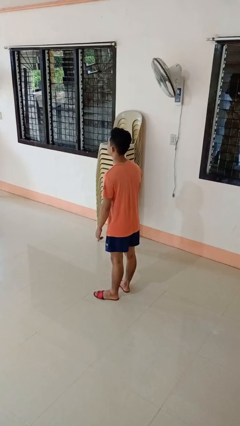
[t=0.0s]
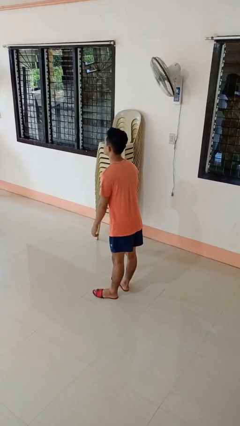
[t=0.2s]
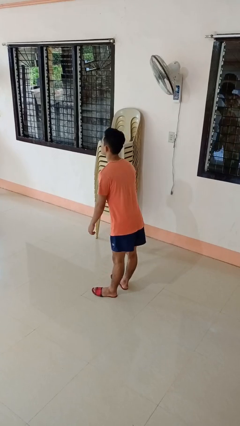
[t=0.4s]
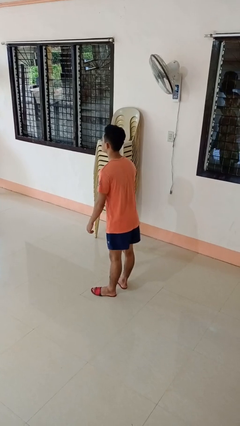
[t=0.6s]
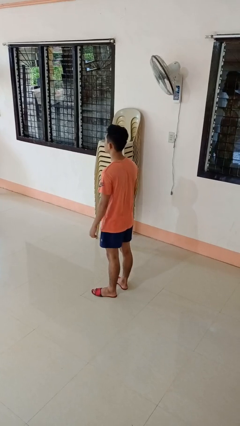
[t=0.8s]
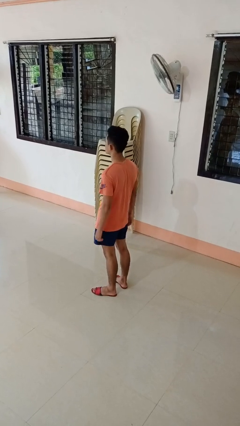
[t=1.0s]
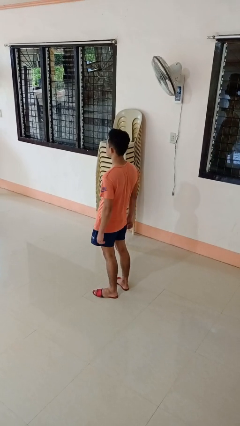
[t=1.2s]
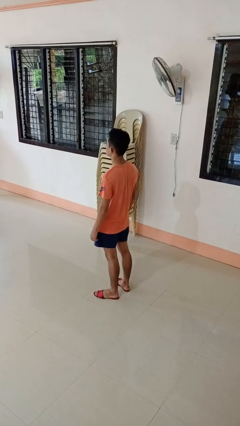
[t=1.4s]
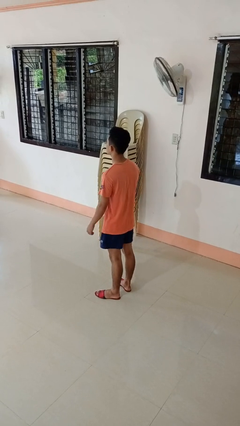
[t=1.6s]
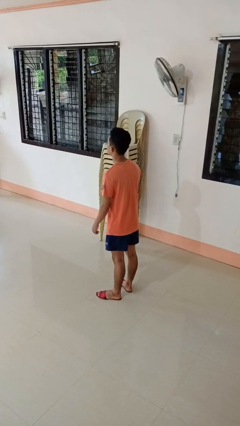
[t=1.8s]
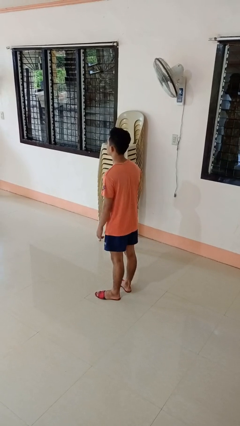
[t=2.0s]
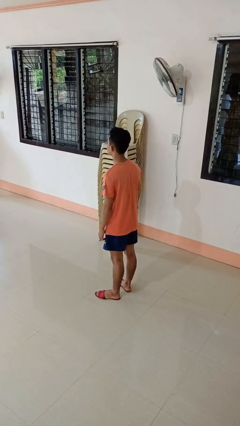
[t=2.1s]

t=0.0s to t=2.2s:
person wiggles hips

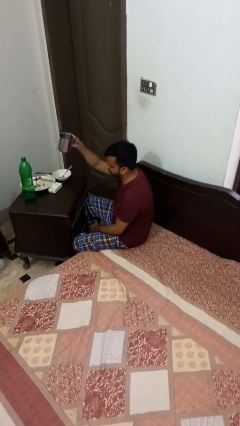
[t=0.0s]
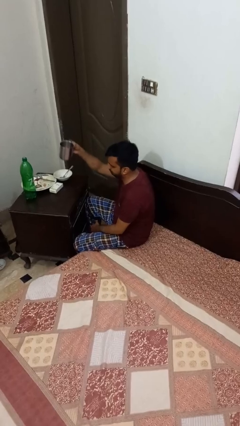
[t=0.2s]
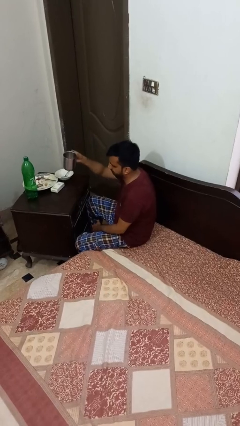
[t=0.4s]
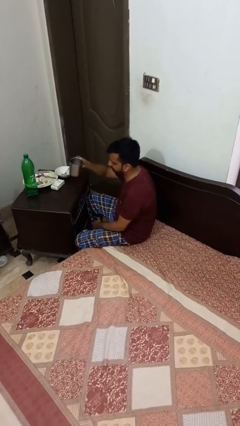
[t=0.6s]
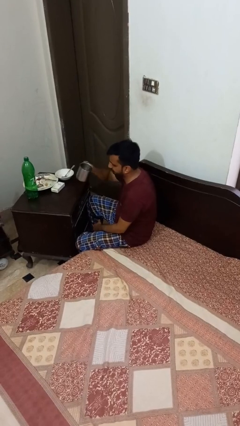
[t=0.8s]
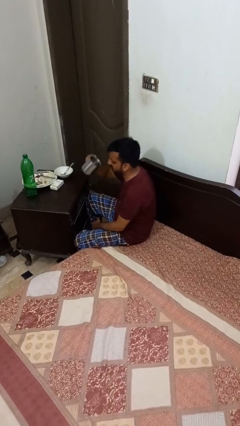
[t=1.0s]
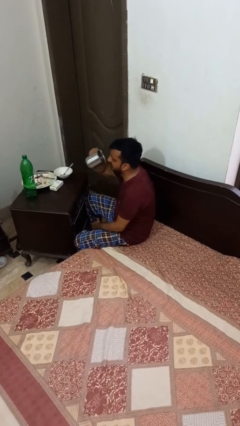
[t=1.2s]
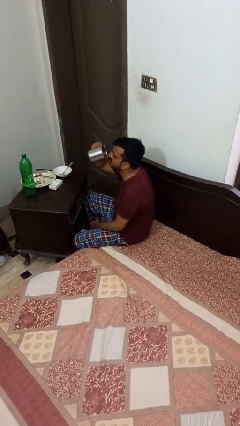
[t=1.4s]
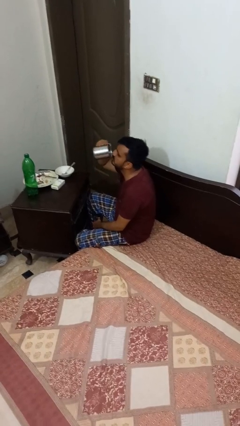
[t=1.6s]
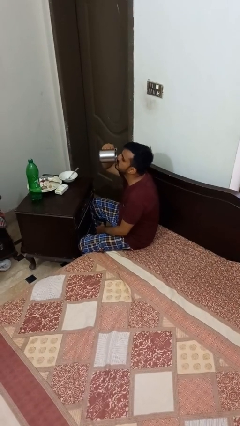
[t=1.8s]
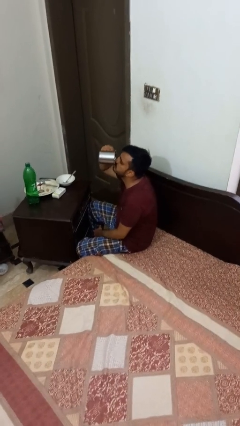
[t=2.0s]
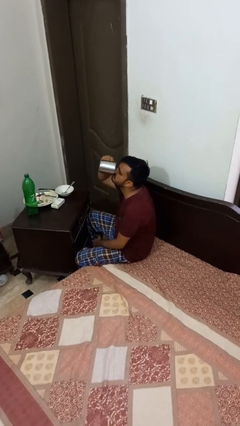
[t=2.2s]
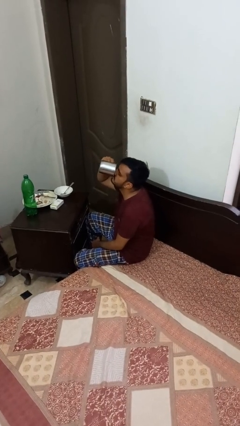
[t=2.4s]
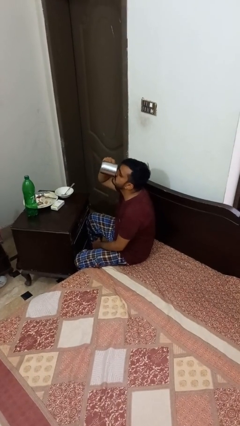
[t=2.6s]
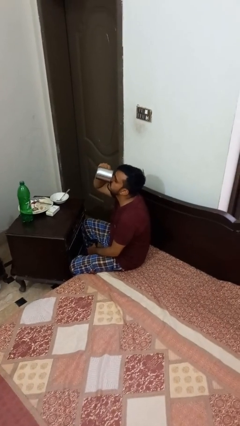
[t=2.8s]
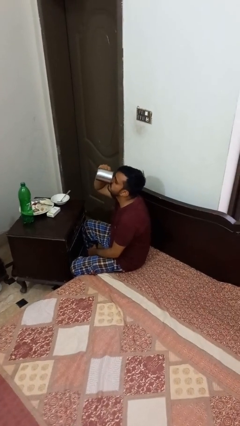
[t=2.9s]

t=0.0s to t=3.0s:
person drinks from shotglass

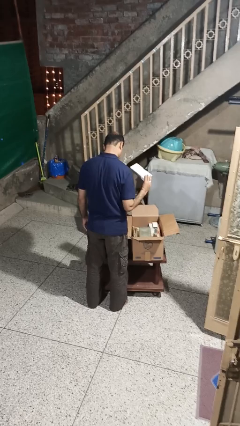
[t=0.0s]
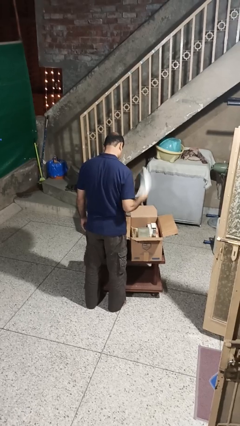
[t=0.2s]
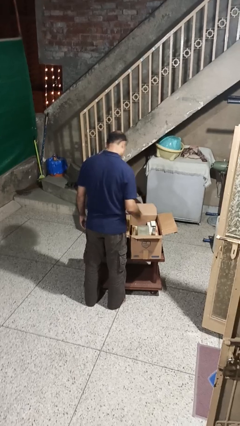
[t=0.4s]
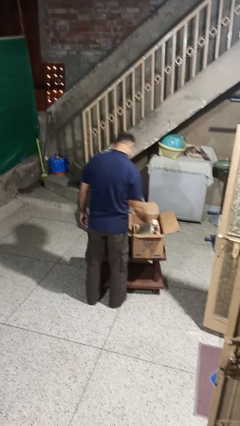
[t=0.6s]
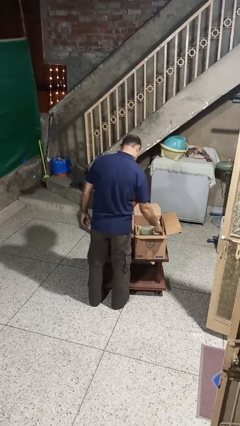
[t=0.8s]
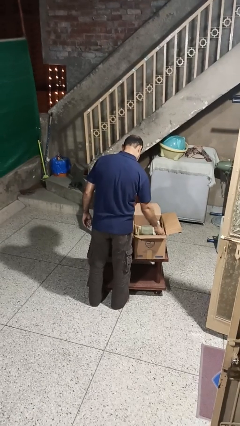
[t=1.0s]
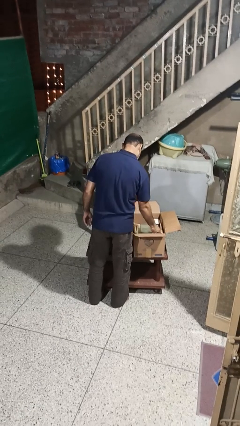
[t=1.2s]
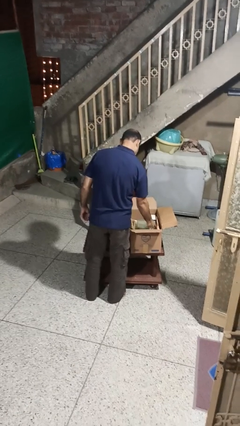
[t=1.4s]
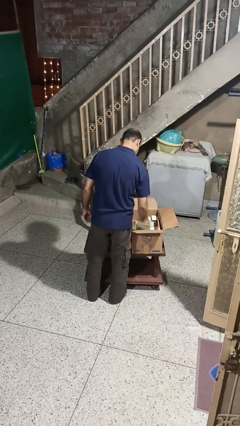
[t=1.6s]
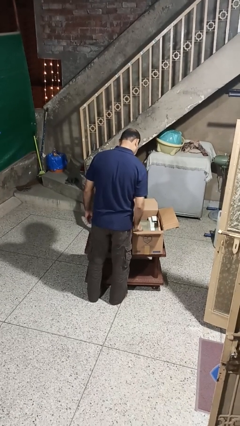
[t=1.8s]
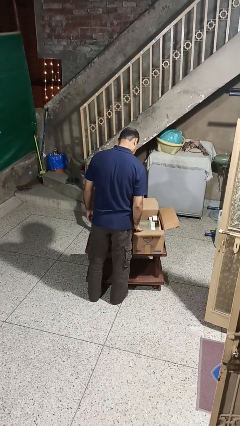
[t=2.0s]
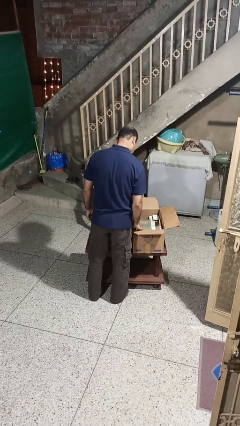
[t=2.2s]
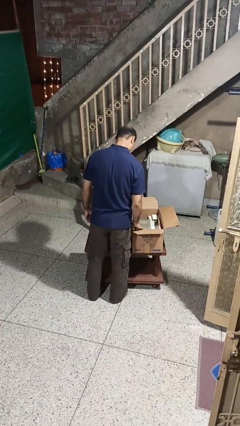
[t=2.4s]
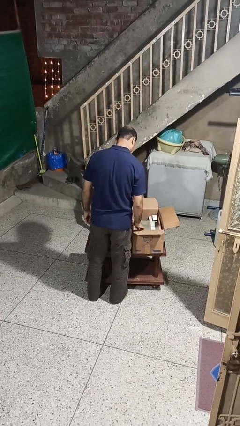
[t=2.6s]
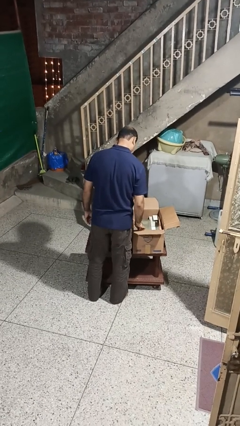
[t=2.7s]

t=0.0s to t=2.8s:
person puts object into box

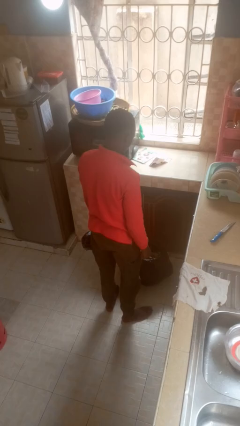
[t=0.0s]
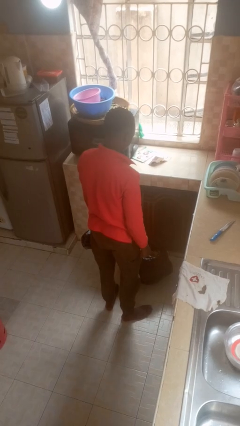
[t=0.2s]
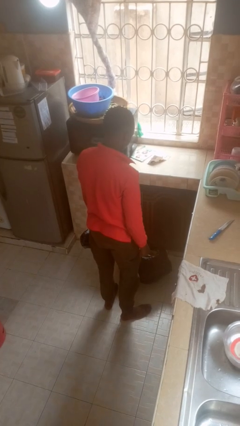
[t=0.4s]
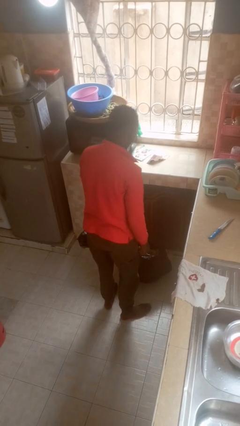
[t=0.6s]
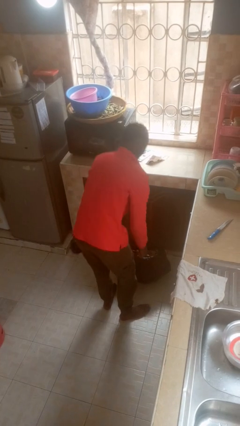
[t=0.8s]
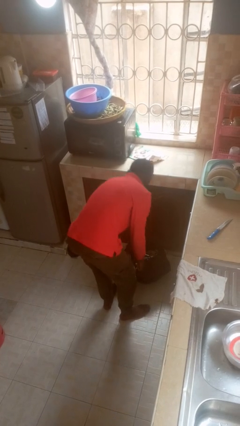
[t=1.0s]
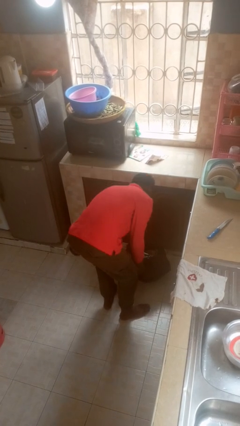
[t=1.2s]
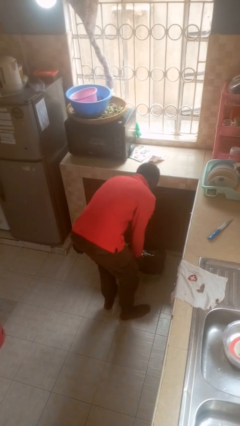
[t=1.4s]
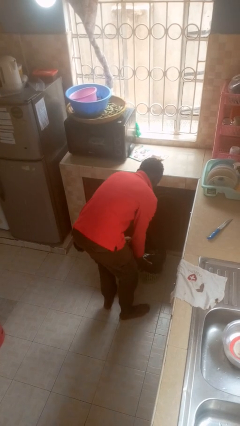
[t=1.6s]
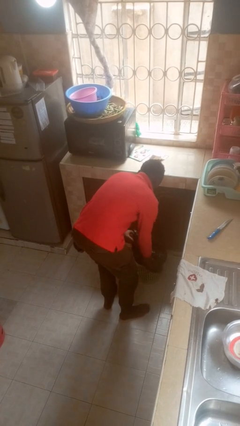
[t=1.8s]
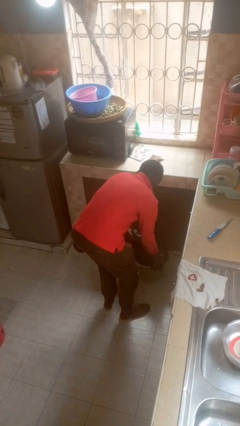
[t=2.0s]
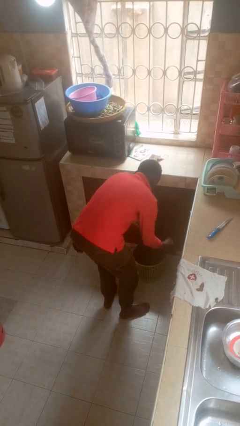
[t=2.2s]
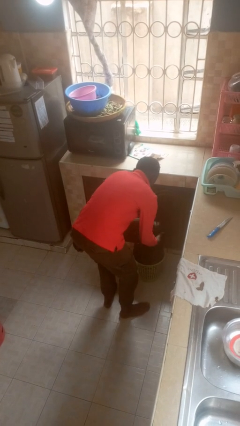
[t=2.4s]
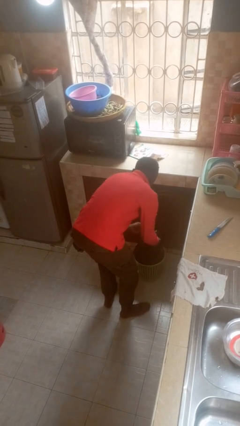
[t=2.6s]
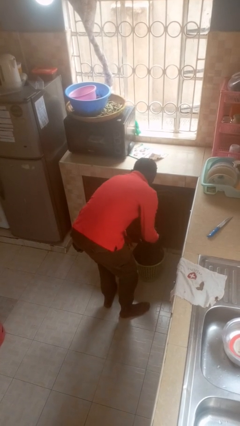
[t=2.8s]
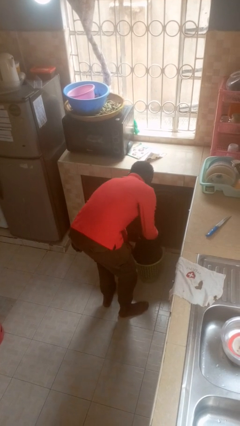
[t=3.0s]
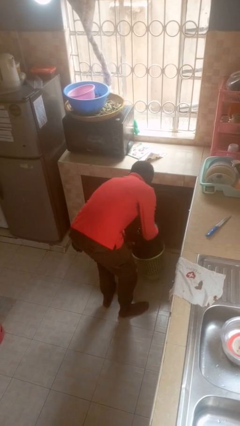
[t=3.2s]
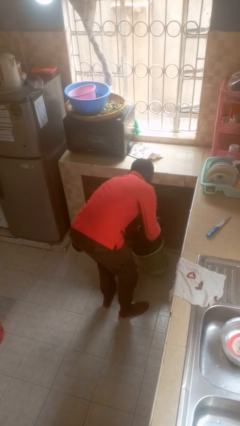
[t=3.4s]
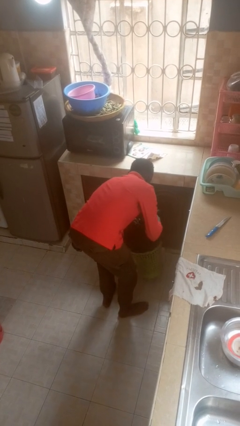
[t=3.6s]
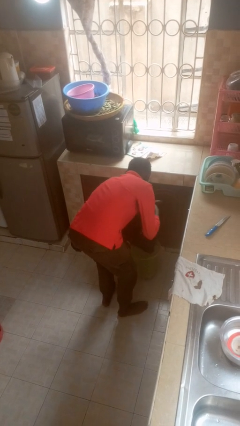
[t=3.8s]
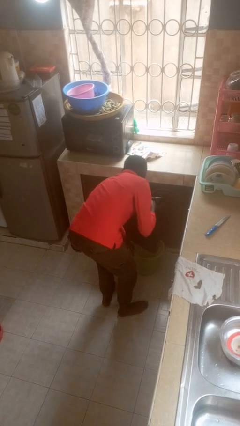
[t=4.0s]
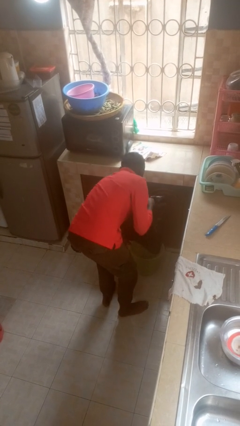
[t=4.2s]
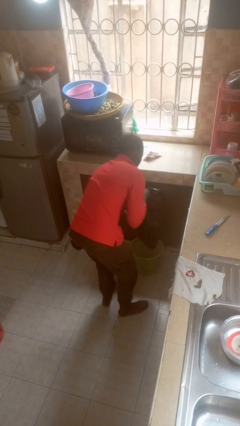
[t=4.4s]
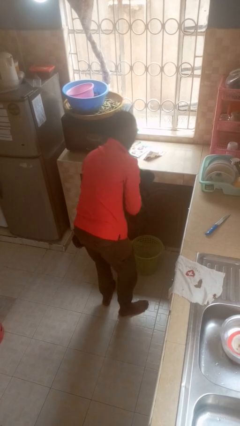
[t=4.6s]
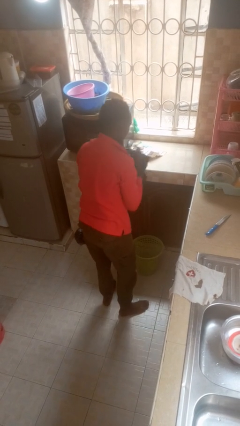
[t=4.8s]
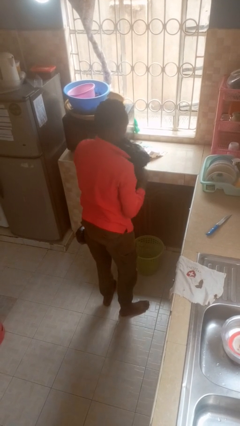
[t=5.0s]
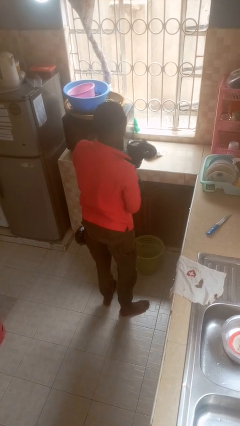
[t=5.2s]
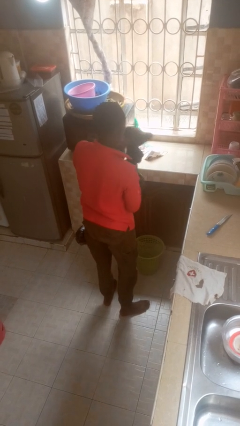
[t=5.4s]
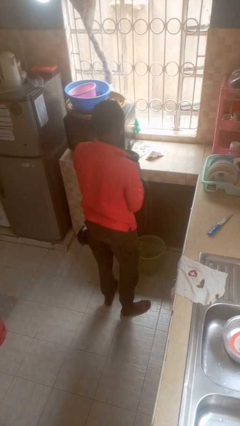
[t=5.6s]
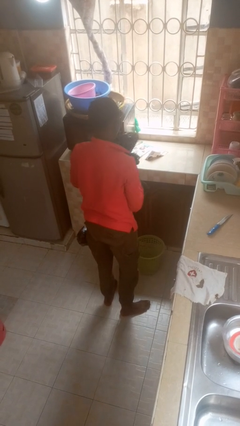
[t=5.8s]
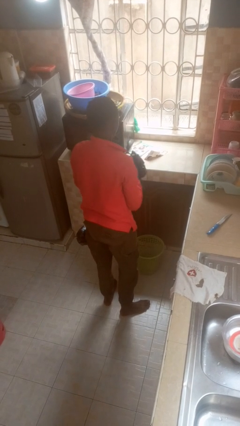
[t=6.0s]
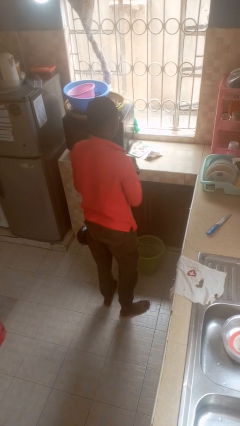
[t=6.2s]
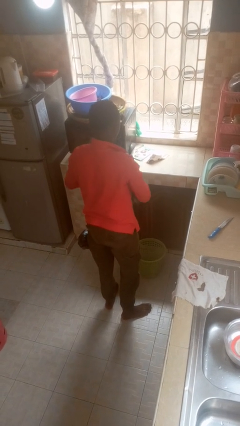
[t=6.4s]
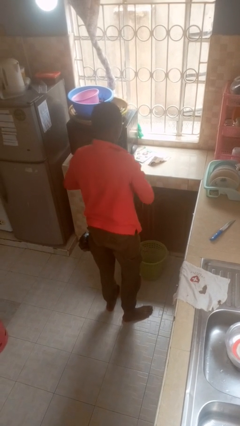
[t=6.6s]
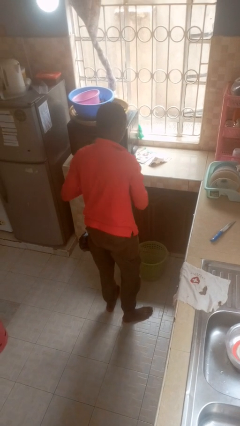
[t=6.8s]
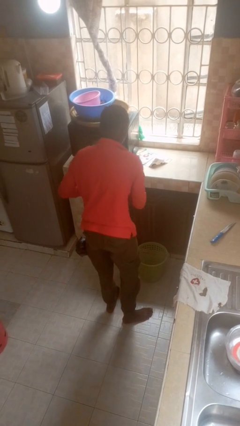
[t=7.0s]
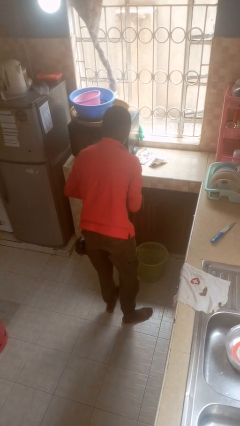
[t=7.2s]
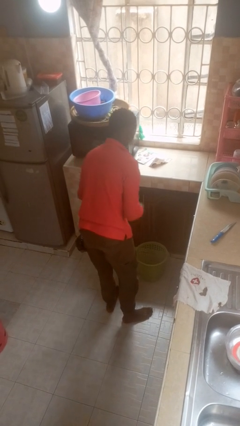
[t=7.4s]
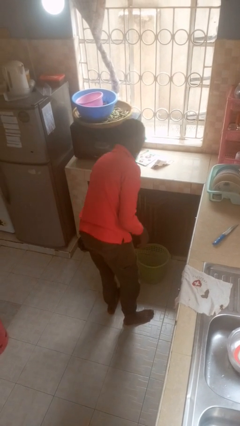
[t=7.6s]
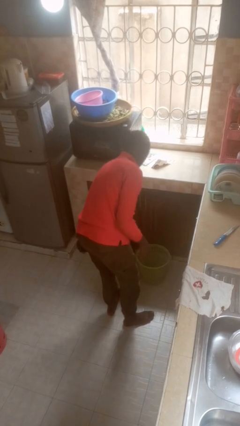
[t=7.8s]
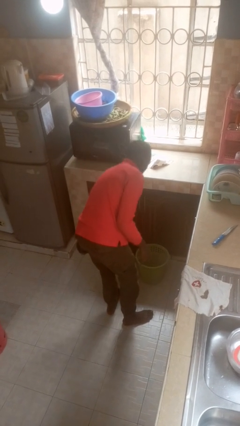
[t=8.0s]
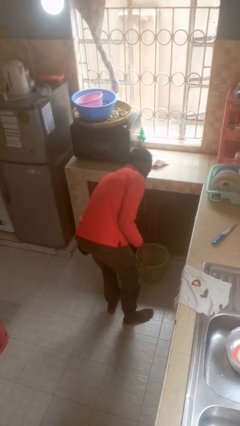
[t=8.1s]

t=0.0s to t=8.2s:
person removes trashbag from trashcan

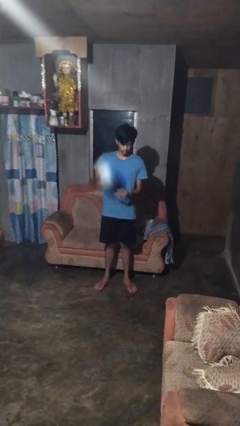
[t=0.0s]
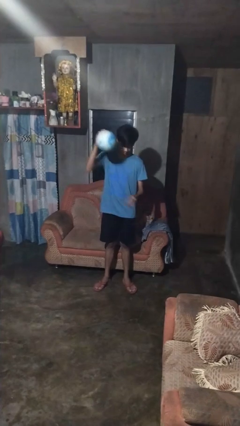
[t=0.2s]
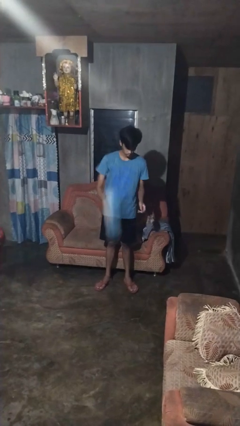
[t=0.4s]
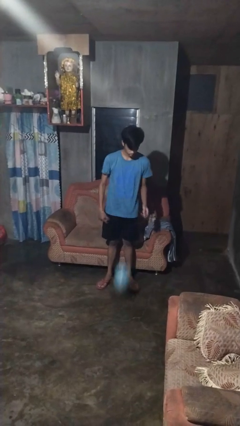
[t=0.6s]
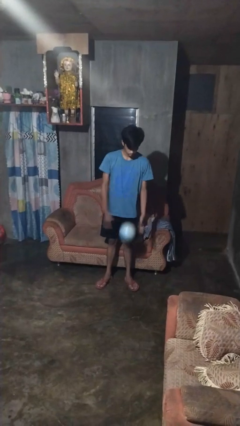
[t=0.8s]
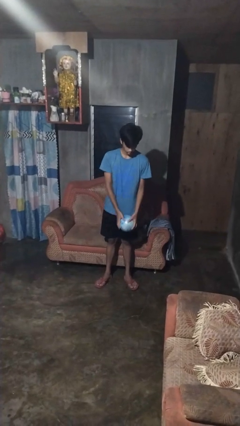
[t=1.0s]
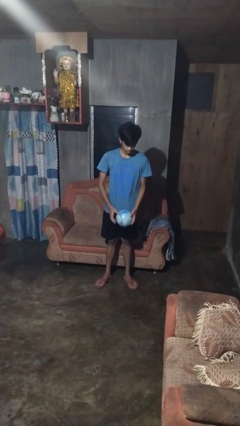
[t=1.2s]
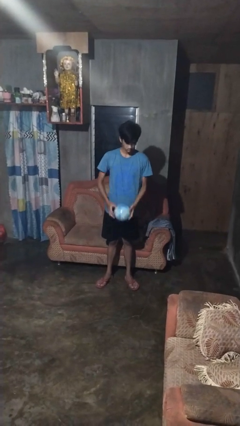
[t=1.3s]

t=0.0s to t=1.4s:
person bounces ball on floor
